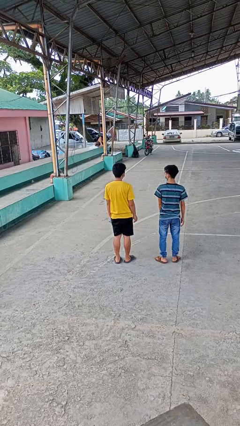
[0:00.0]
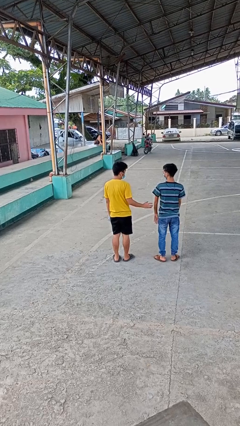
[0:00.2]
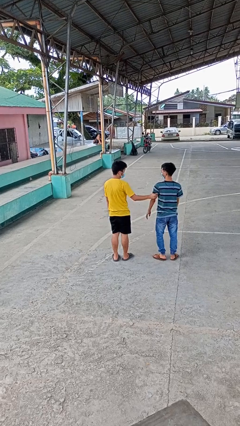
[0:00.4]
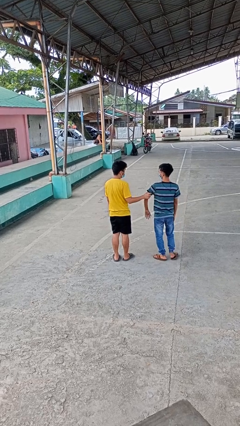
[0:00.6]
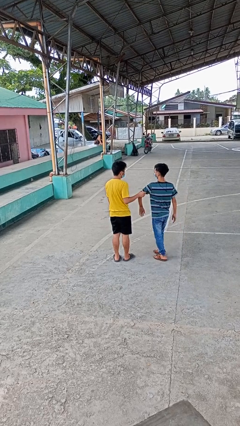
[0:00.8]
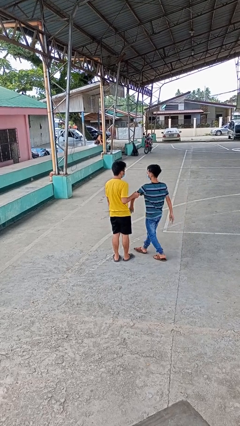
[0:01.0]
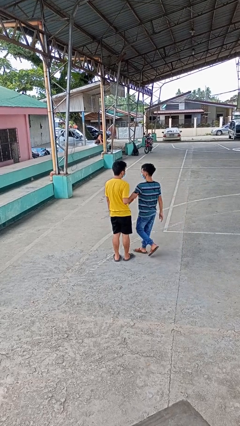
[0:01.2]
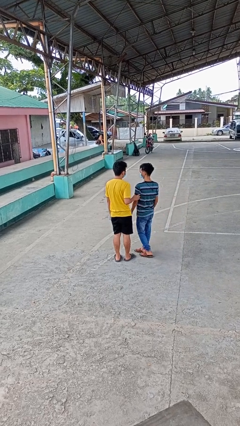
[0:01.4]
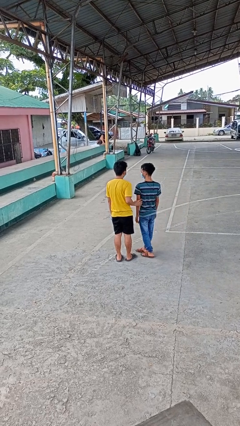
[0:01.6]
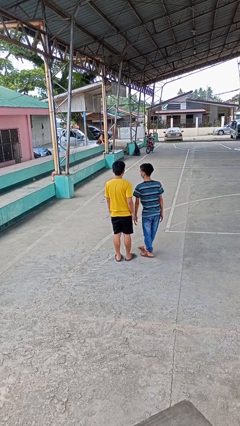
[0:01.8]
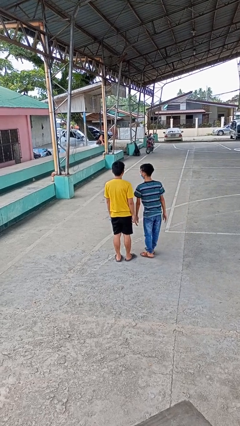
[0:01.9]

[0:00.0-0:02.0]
person grabs person by bicep

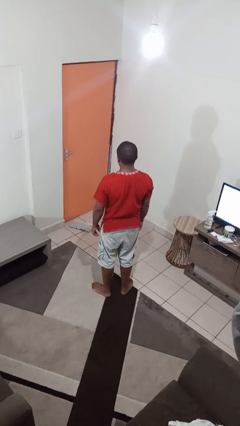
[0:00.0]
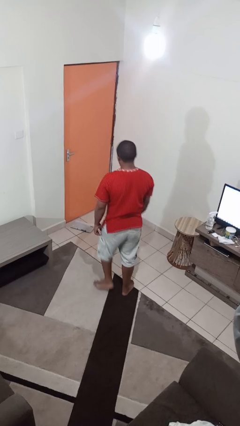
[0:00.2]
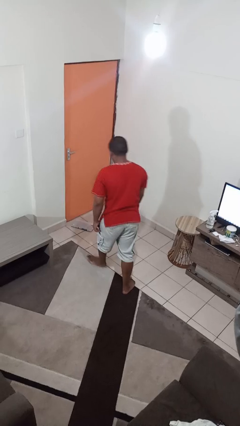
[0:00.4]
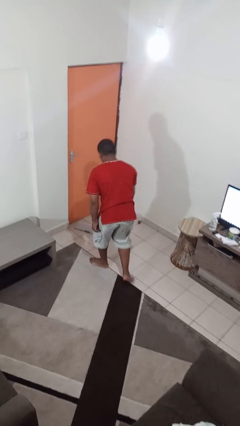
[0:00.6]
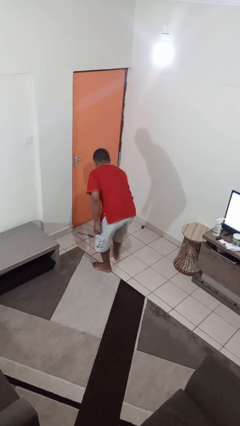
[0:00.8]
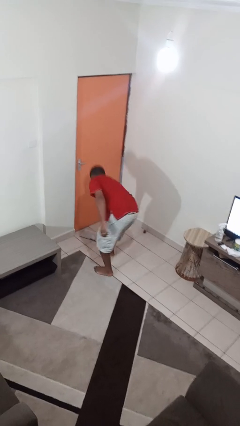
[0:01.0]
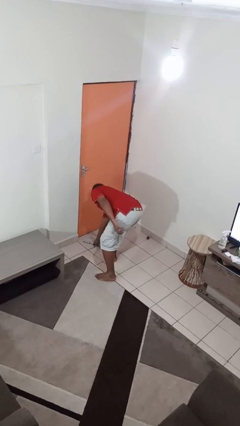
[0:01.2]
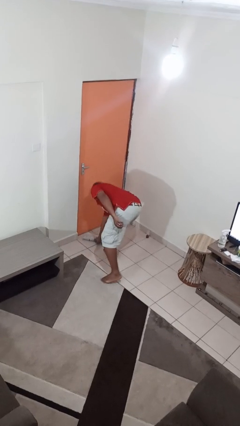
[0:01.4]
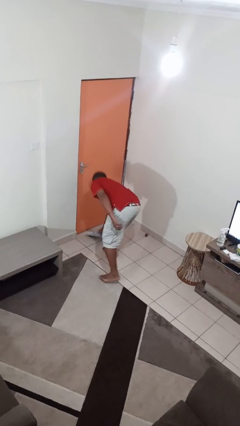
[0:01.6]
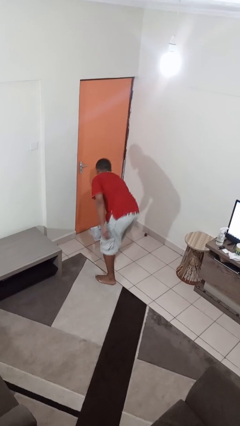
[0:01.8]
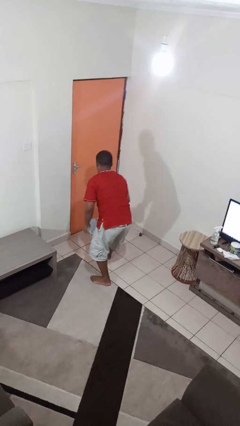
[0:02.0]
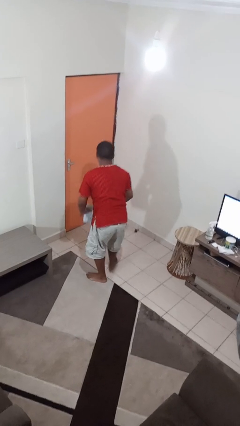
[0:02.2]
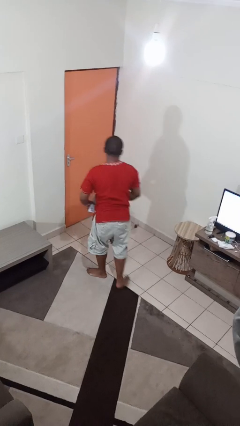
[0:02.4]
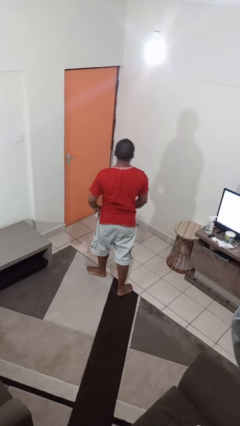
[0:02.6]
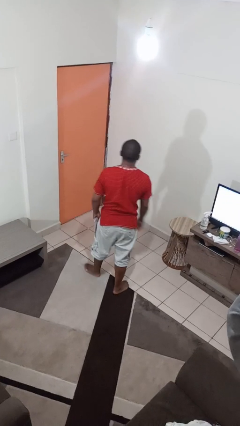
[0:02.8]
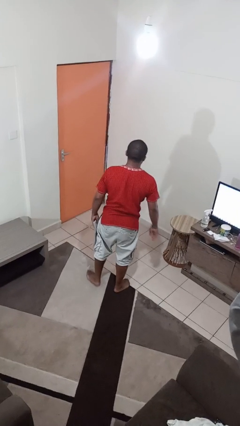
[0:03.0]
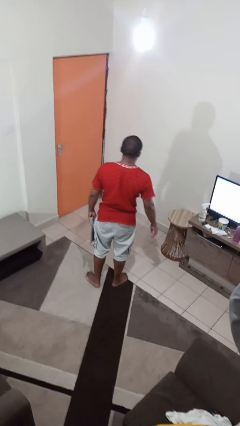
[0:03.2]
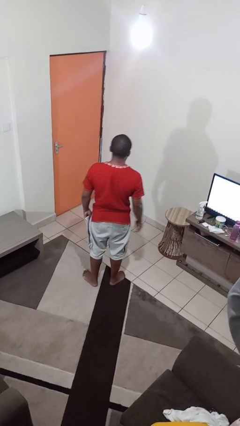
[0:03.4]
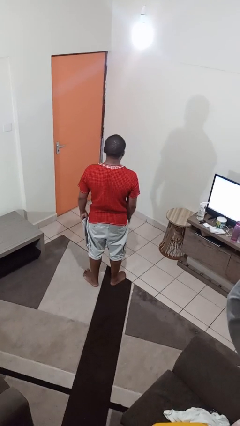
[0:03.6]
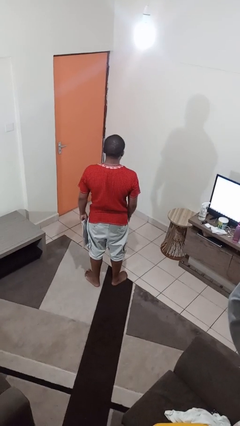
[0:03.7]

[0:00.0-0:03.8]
person picks up object from floor

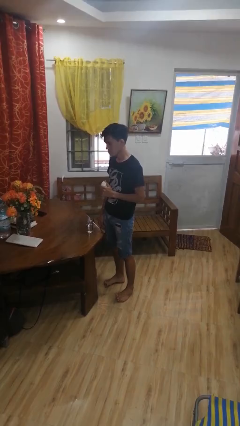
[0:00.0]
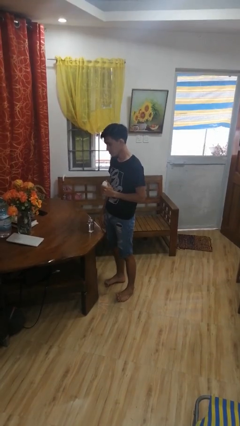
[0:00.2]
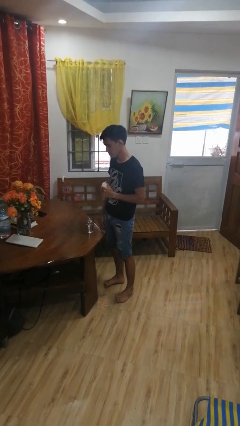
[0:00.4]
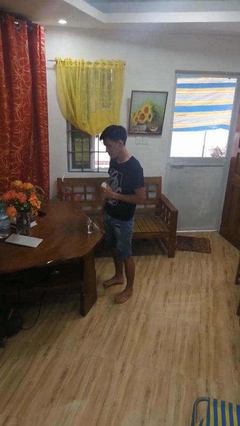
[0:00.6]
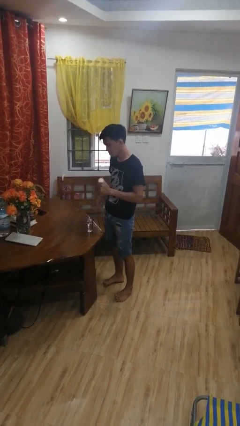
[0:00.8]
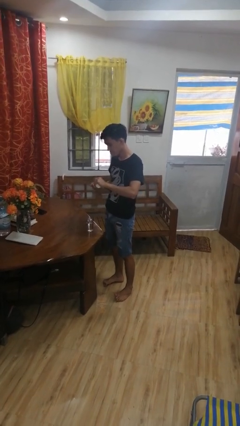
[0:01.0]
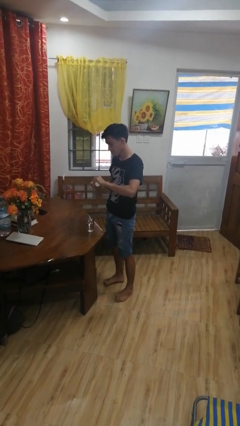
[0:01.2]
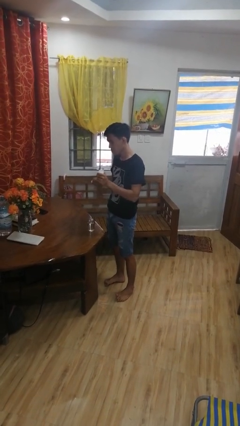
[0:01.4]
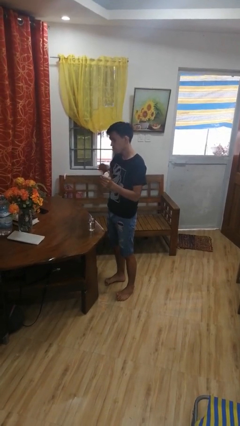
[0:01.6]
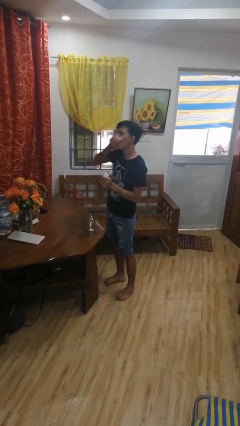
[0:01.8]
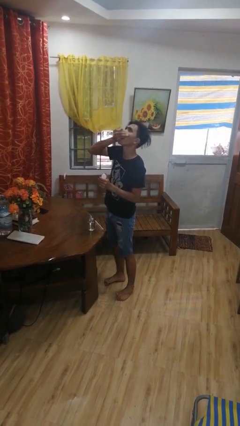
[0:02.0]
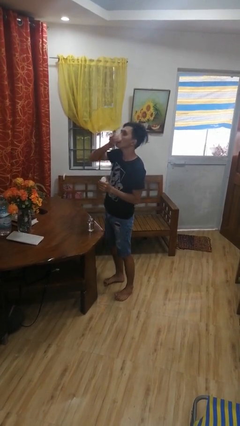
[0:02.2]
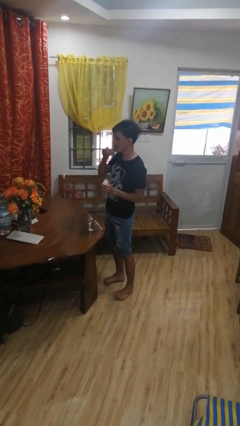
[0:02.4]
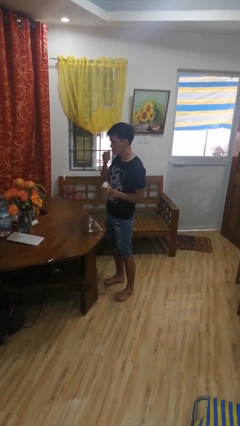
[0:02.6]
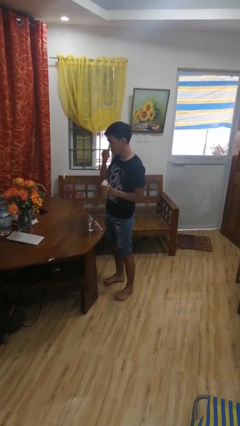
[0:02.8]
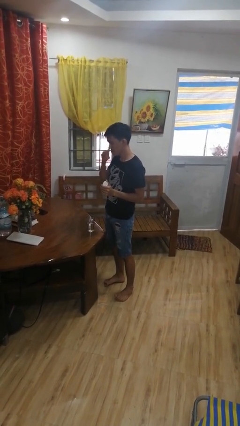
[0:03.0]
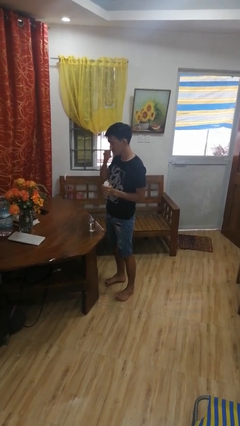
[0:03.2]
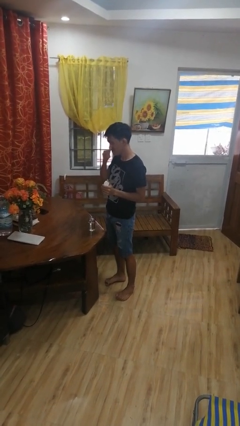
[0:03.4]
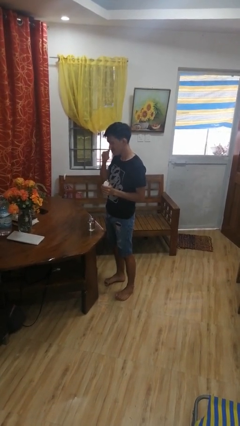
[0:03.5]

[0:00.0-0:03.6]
person takes medicine pills

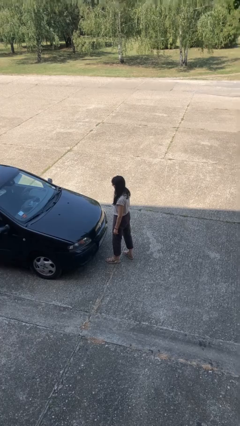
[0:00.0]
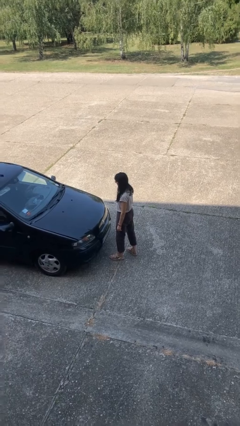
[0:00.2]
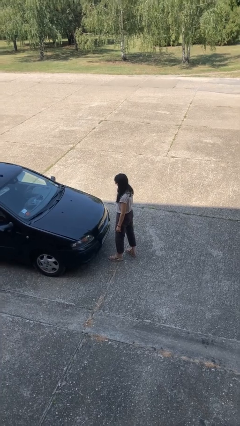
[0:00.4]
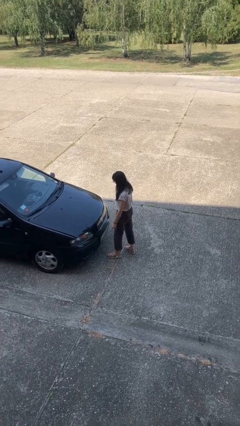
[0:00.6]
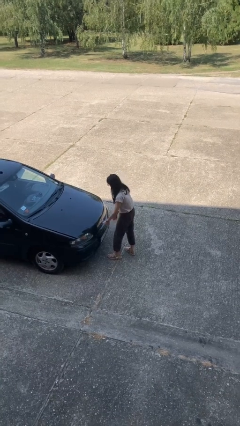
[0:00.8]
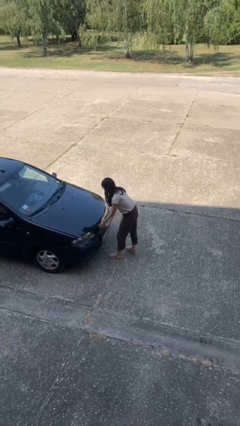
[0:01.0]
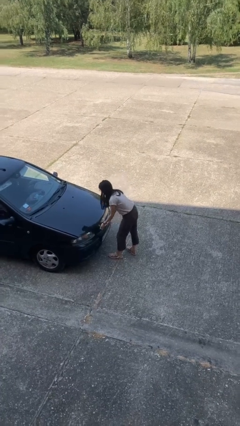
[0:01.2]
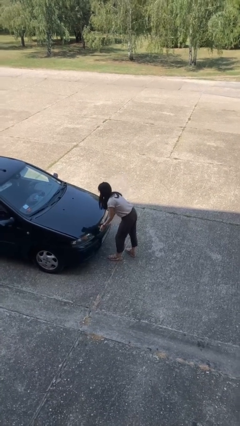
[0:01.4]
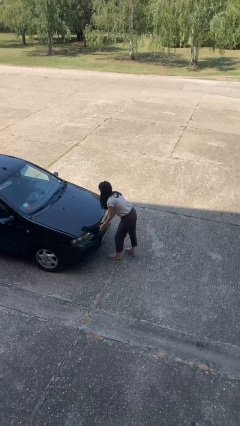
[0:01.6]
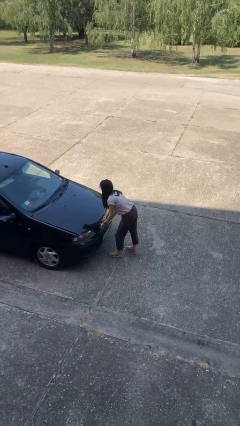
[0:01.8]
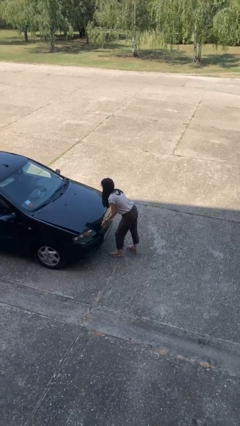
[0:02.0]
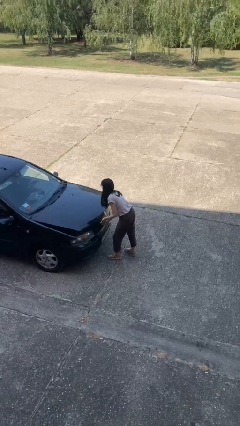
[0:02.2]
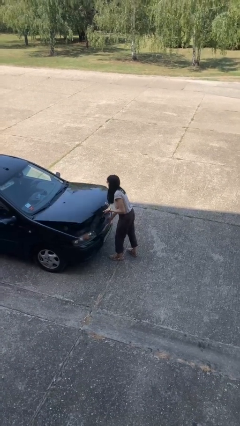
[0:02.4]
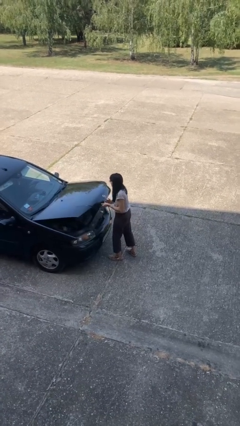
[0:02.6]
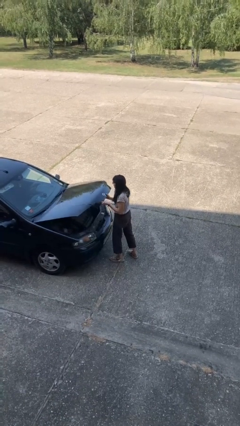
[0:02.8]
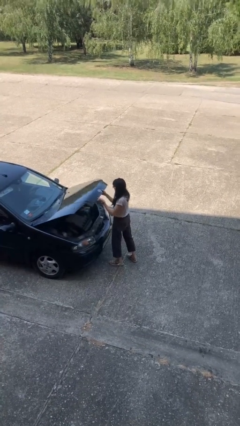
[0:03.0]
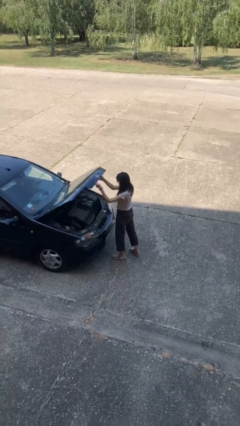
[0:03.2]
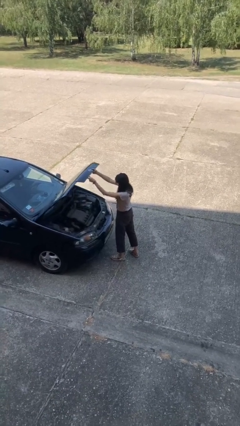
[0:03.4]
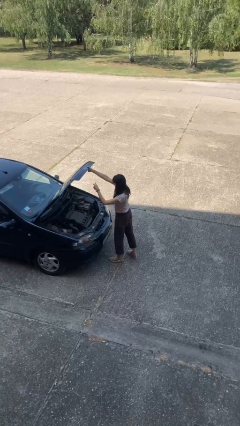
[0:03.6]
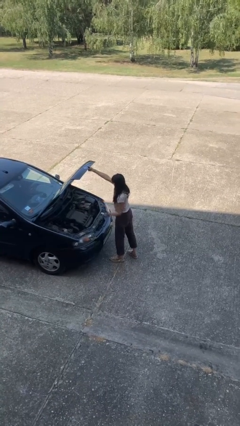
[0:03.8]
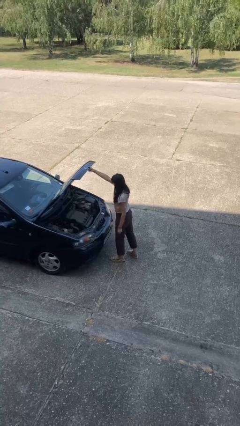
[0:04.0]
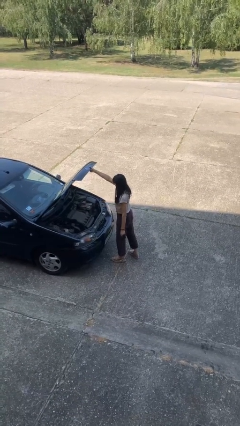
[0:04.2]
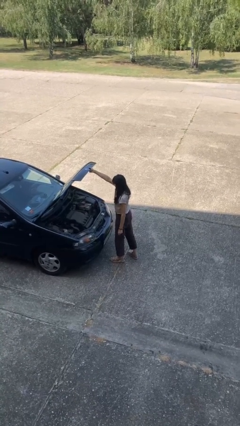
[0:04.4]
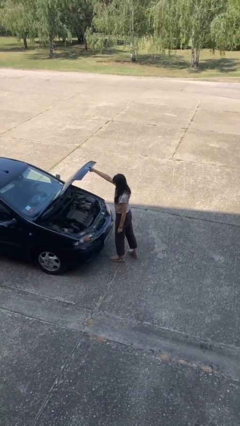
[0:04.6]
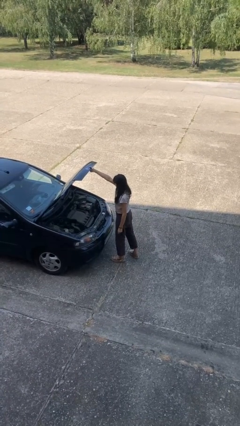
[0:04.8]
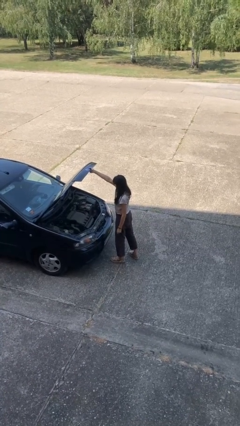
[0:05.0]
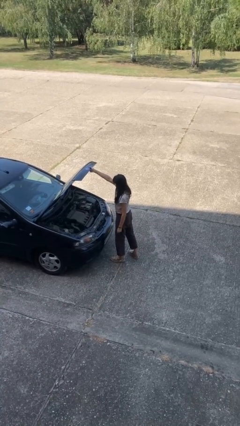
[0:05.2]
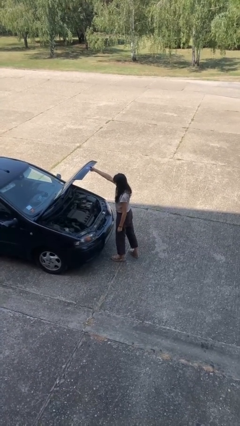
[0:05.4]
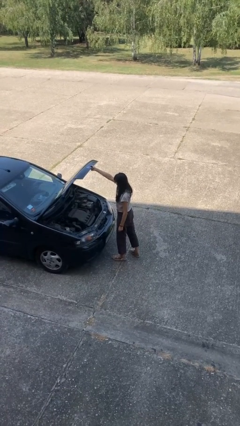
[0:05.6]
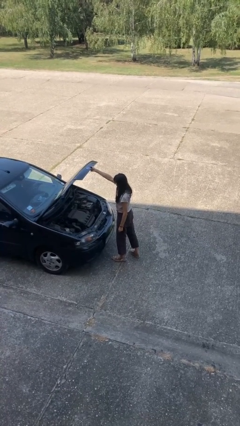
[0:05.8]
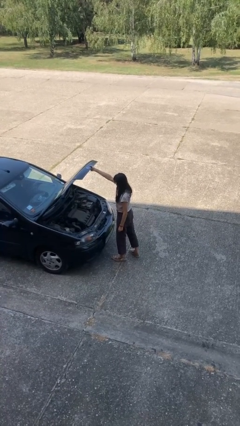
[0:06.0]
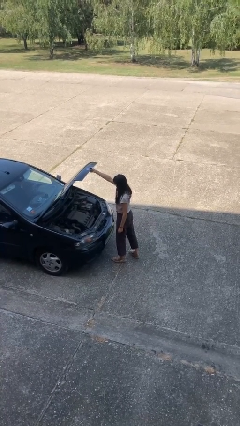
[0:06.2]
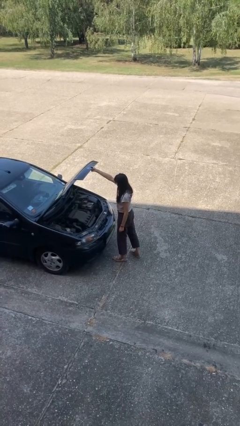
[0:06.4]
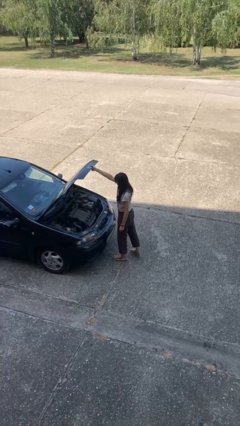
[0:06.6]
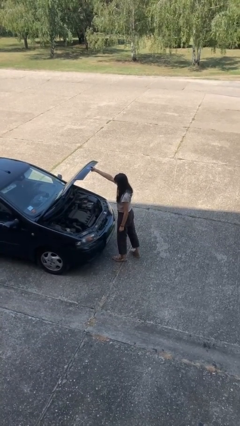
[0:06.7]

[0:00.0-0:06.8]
person opens car hood

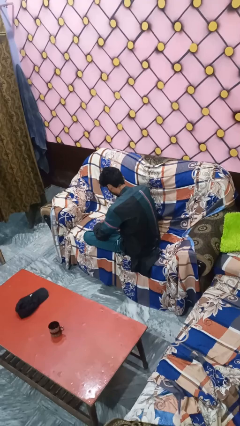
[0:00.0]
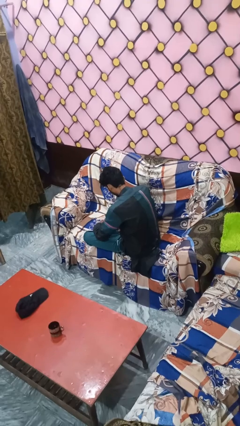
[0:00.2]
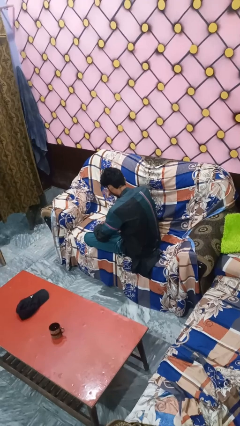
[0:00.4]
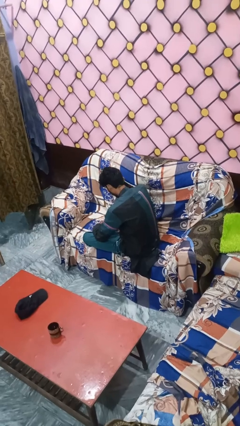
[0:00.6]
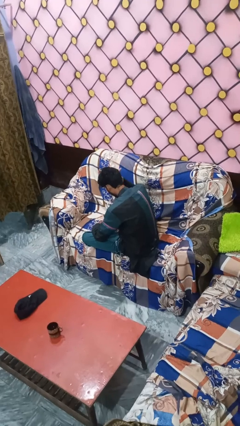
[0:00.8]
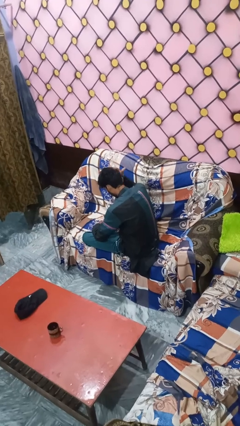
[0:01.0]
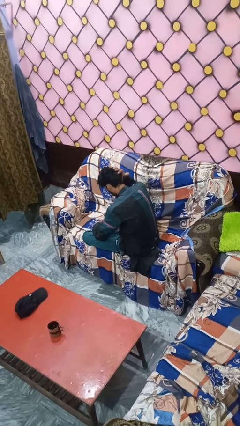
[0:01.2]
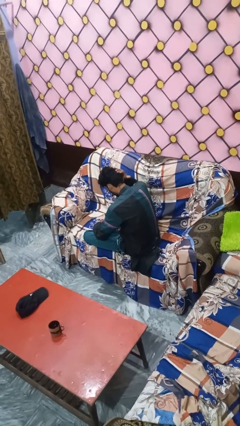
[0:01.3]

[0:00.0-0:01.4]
person pats head
